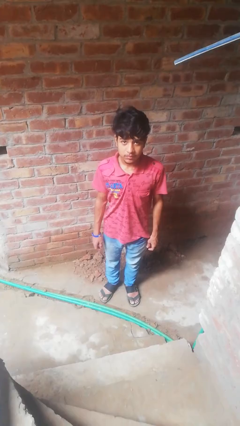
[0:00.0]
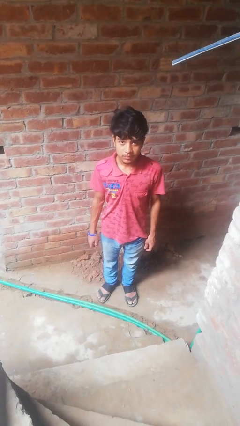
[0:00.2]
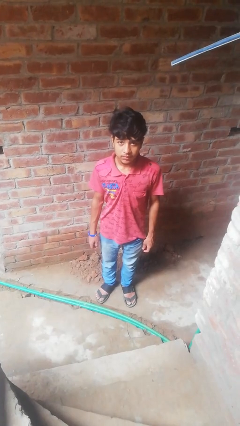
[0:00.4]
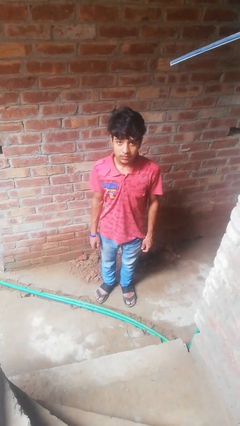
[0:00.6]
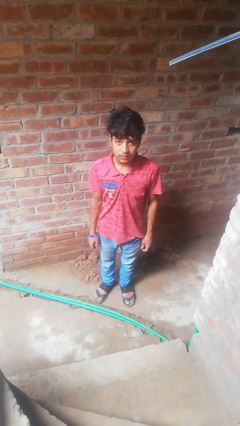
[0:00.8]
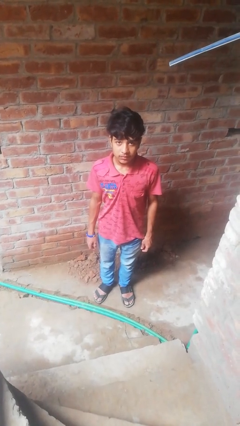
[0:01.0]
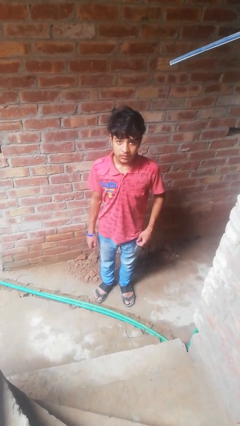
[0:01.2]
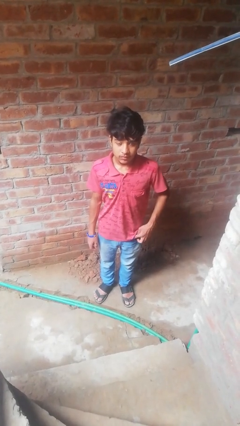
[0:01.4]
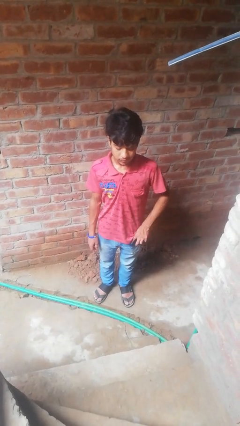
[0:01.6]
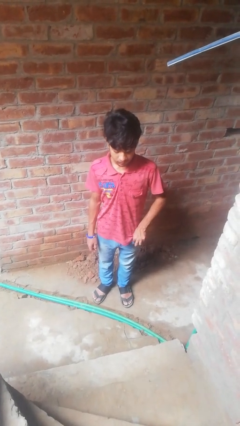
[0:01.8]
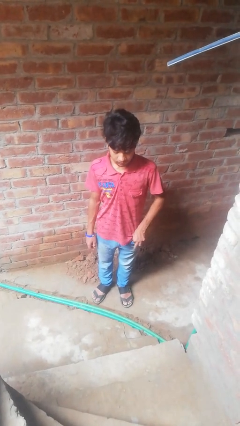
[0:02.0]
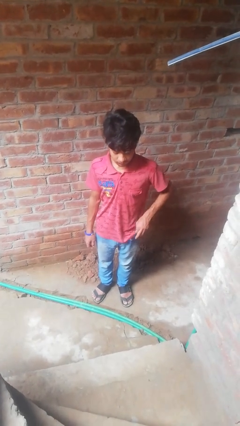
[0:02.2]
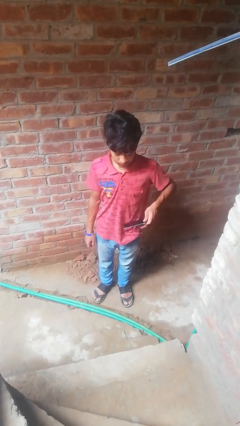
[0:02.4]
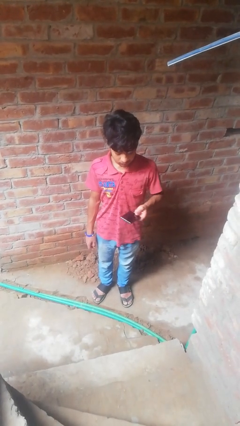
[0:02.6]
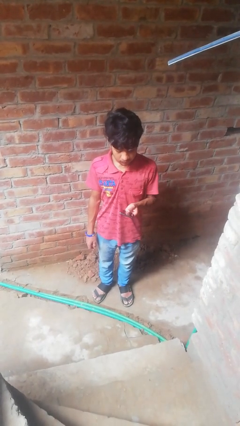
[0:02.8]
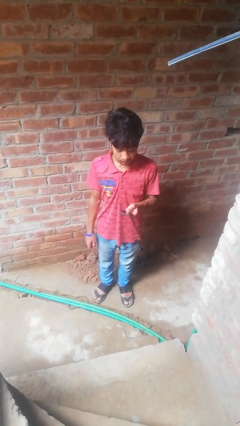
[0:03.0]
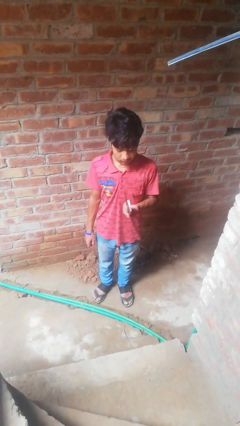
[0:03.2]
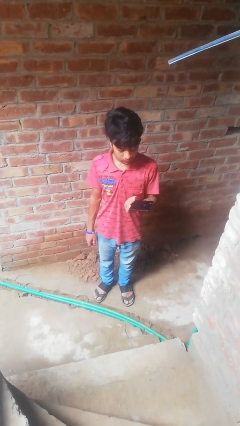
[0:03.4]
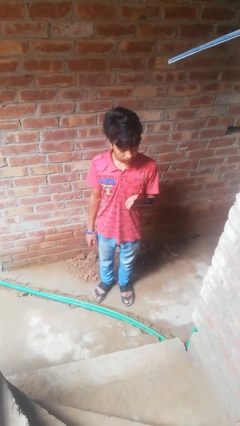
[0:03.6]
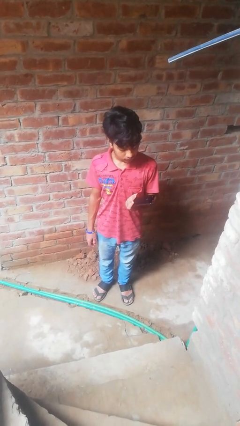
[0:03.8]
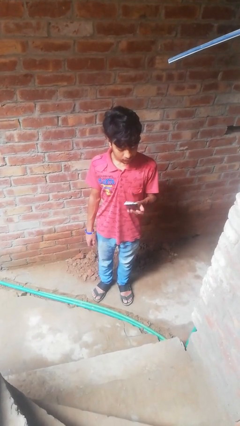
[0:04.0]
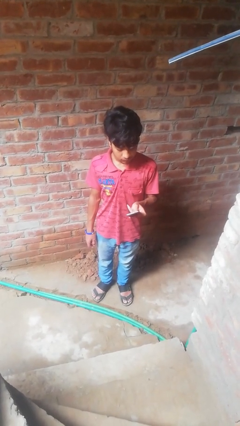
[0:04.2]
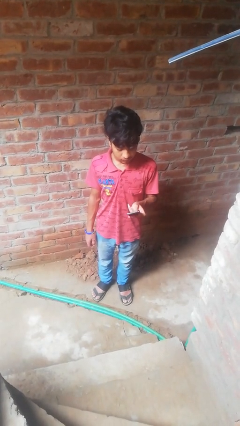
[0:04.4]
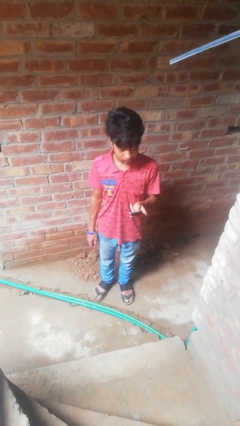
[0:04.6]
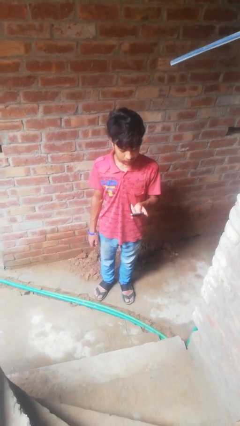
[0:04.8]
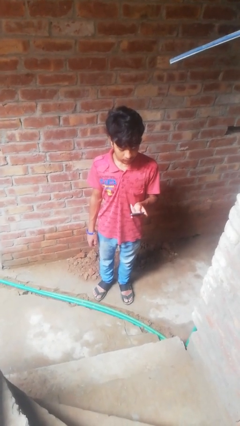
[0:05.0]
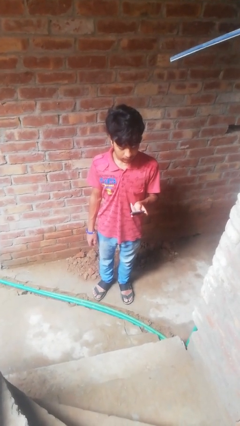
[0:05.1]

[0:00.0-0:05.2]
person takes phone from pocket

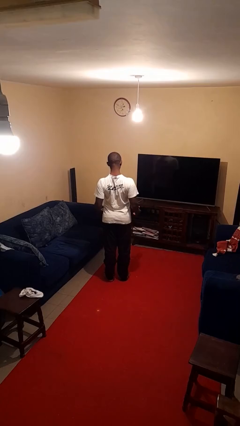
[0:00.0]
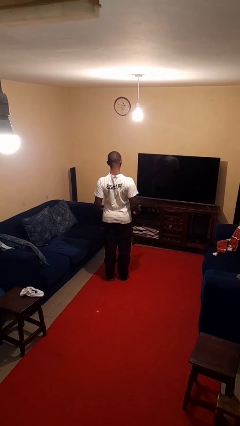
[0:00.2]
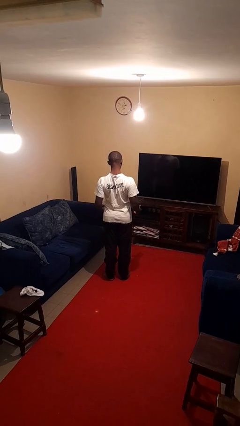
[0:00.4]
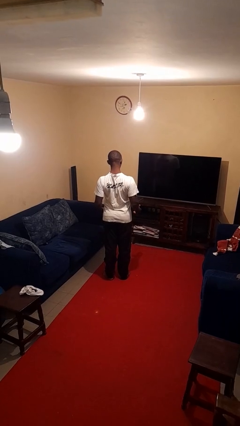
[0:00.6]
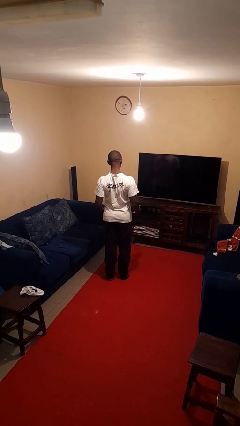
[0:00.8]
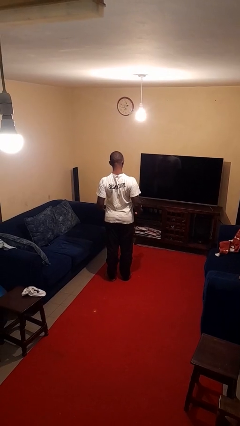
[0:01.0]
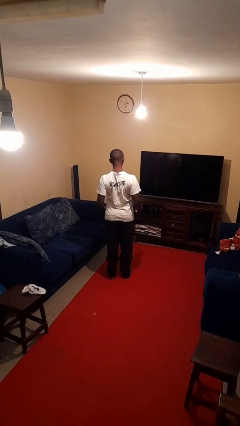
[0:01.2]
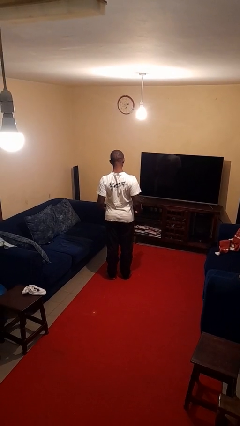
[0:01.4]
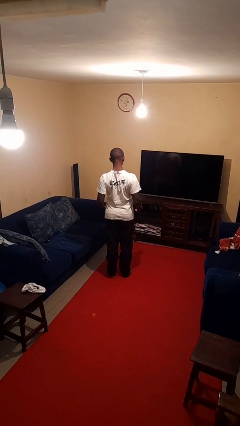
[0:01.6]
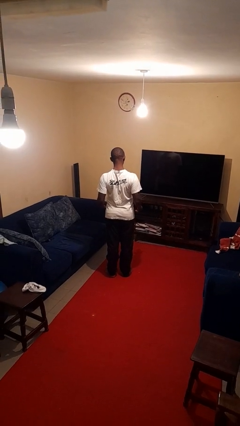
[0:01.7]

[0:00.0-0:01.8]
person shrugs

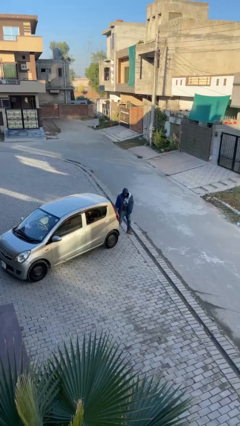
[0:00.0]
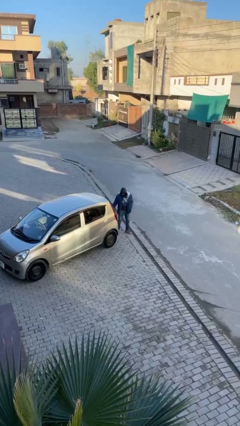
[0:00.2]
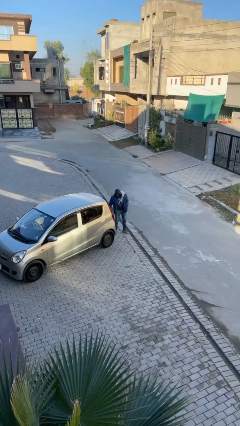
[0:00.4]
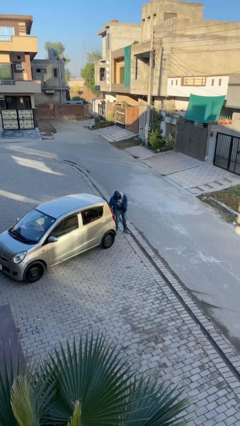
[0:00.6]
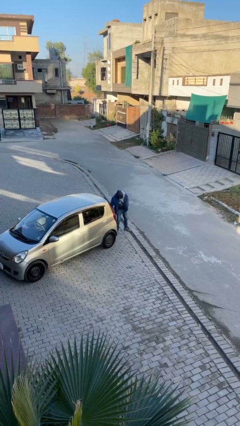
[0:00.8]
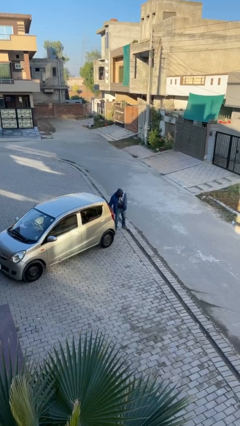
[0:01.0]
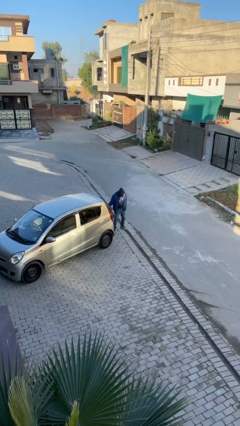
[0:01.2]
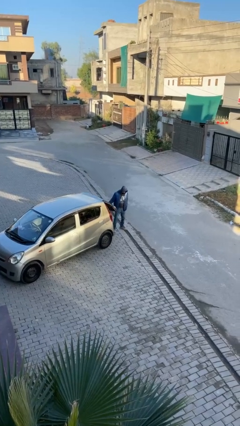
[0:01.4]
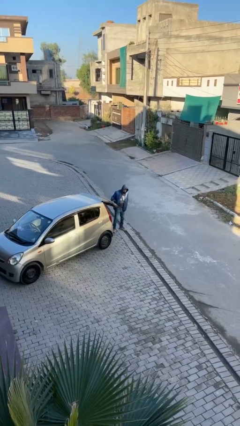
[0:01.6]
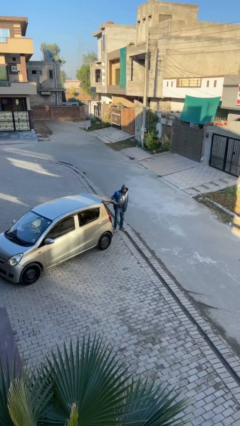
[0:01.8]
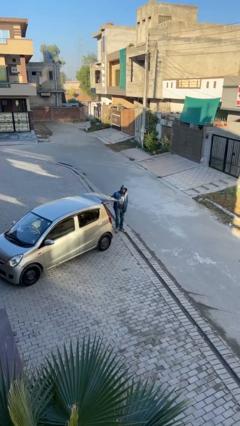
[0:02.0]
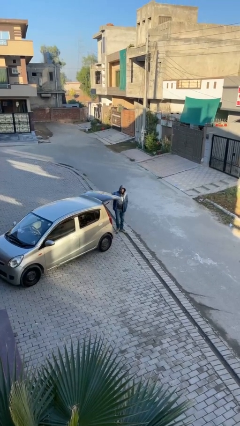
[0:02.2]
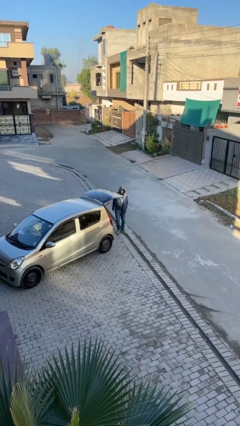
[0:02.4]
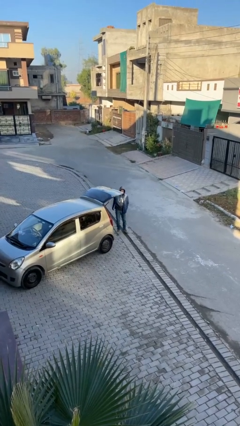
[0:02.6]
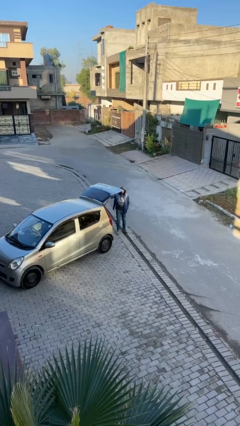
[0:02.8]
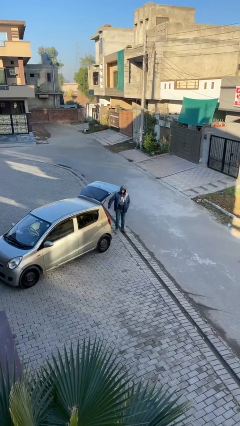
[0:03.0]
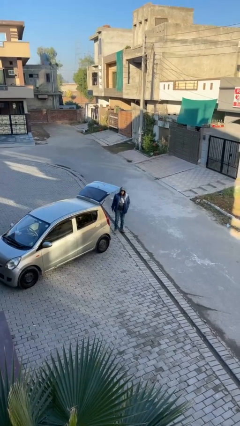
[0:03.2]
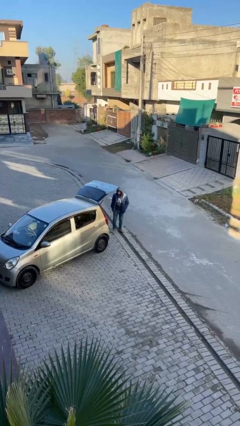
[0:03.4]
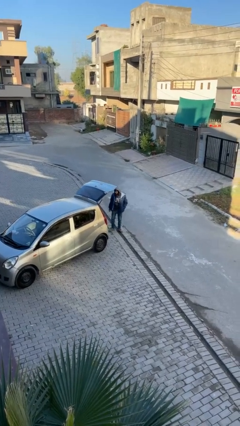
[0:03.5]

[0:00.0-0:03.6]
person opens car trunk

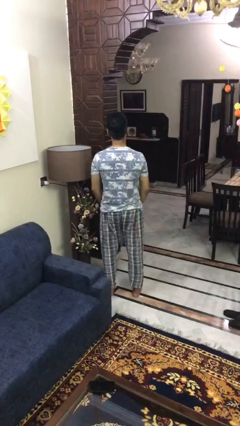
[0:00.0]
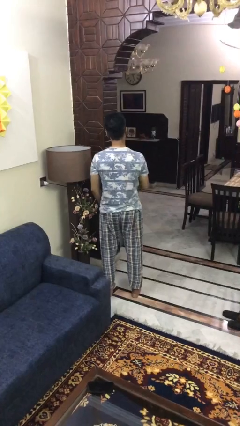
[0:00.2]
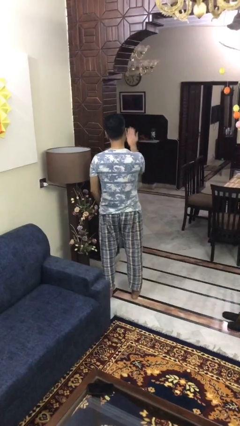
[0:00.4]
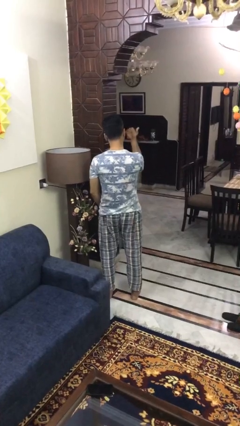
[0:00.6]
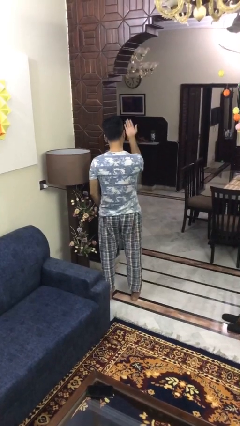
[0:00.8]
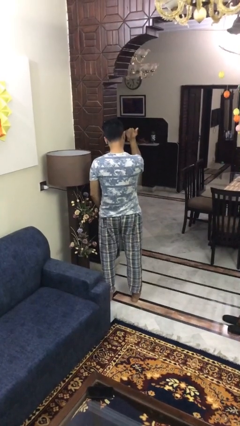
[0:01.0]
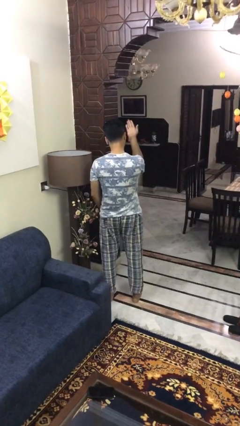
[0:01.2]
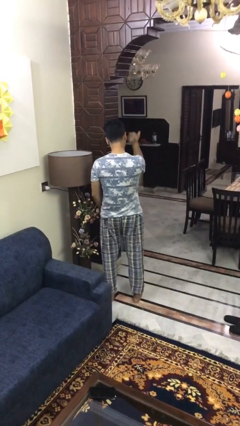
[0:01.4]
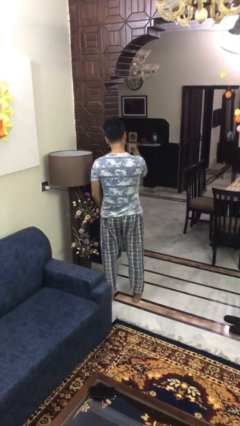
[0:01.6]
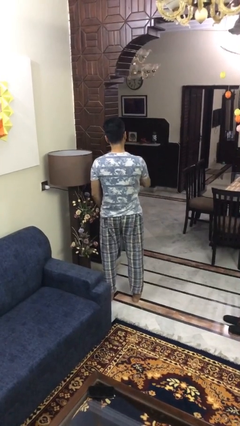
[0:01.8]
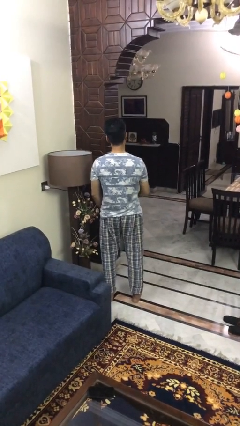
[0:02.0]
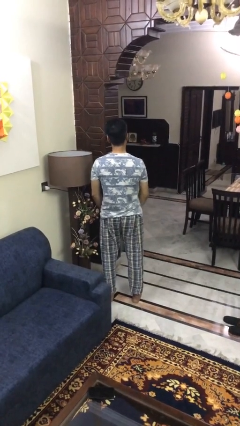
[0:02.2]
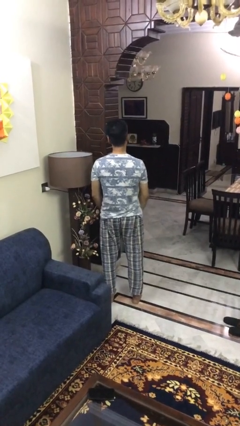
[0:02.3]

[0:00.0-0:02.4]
person gestures come here

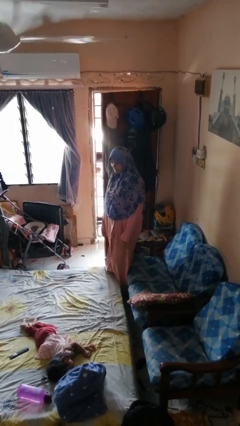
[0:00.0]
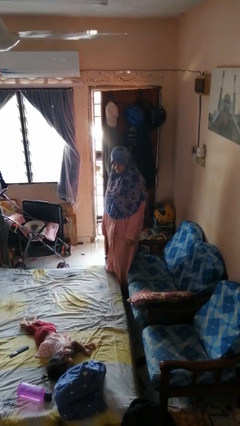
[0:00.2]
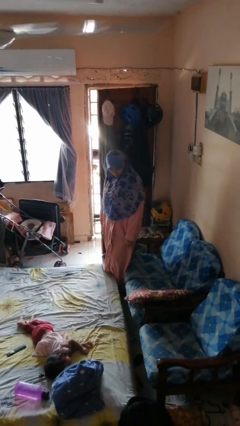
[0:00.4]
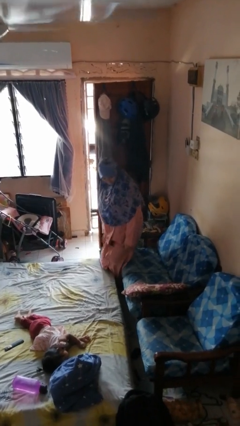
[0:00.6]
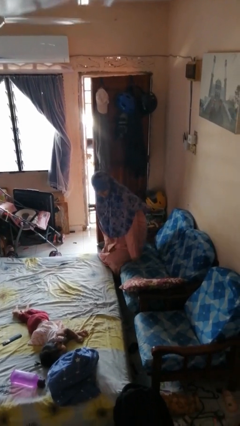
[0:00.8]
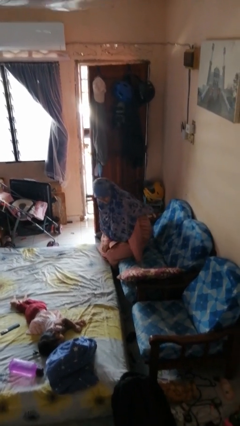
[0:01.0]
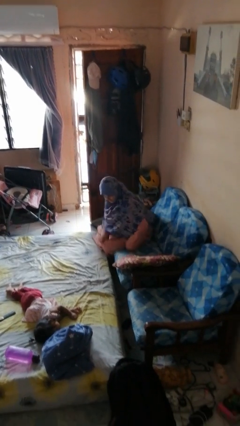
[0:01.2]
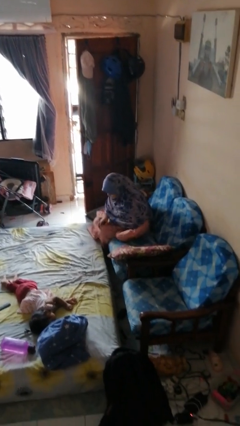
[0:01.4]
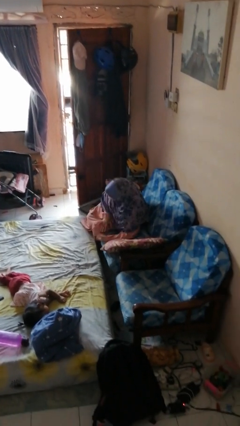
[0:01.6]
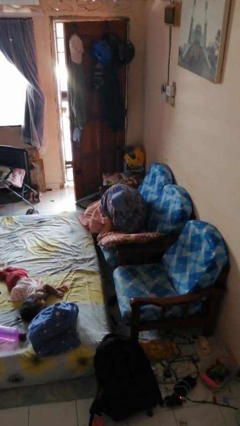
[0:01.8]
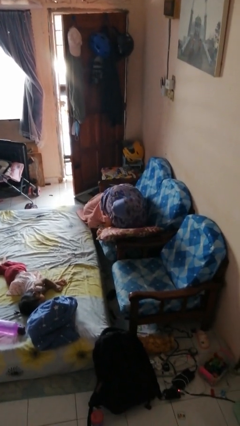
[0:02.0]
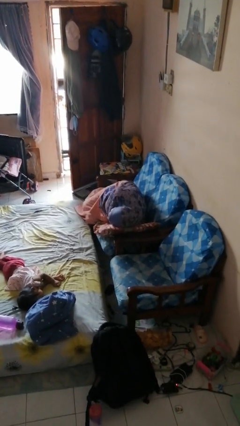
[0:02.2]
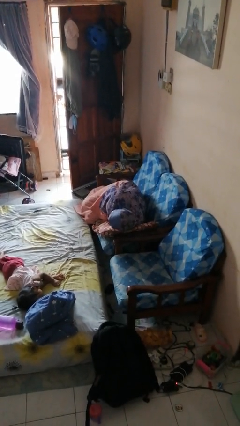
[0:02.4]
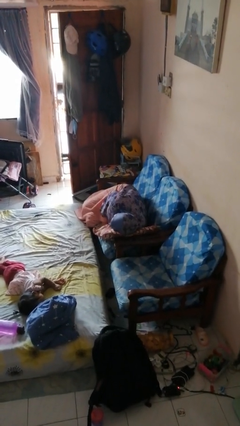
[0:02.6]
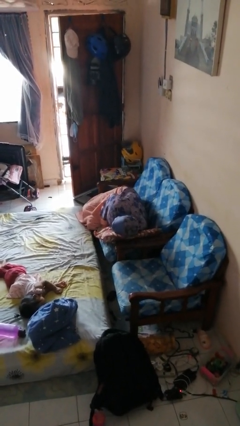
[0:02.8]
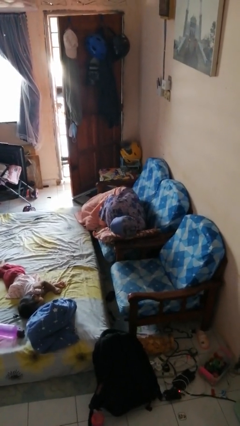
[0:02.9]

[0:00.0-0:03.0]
person lies down on couch

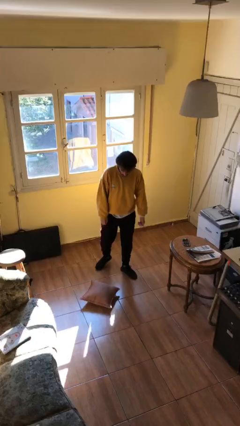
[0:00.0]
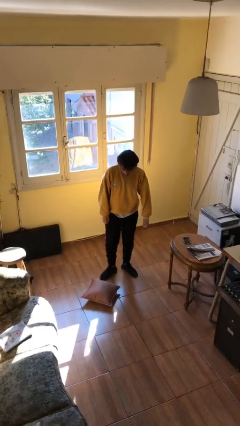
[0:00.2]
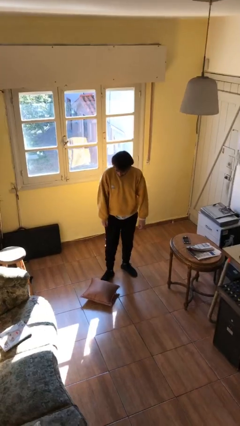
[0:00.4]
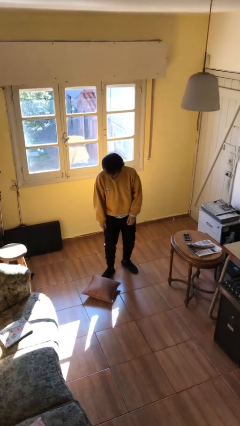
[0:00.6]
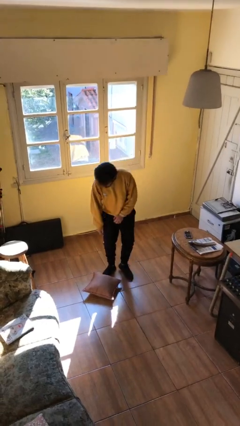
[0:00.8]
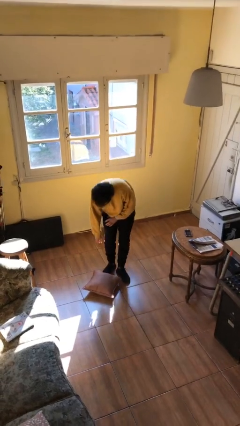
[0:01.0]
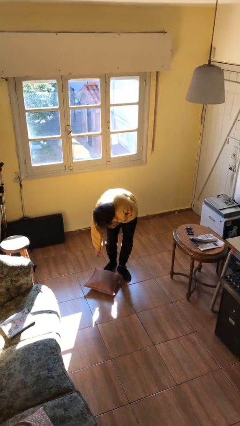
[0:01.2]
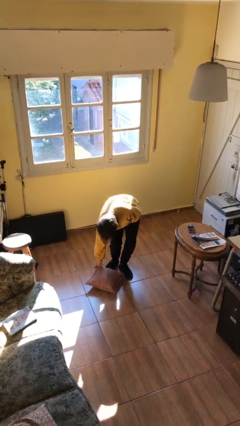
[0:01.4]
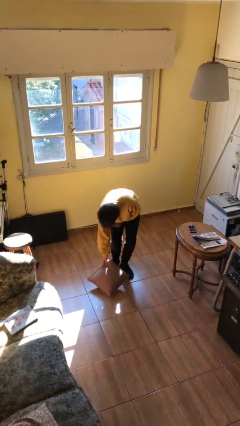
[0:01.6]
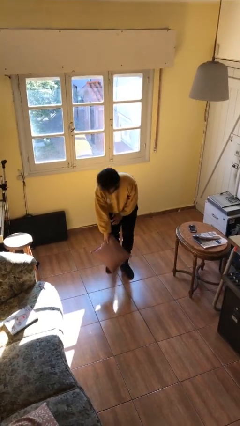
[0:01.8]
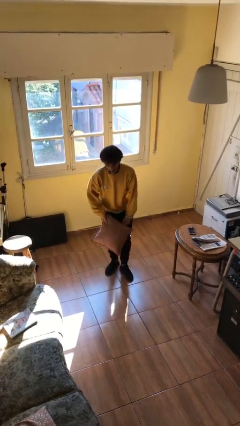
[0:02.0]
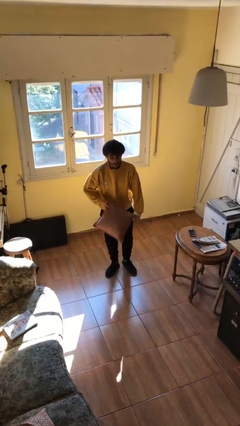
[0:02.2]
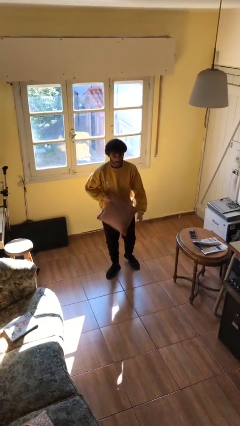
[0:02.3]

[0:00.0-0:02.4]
person picks up object from floor
